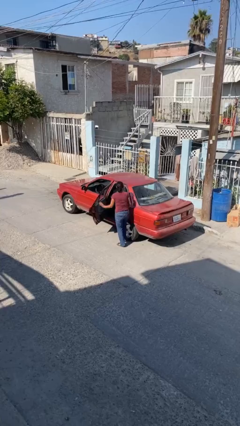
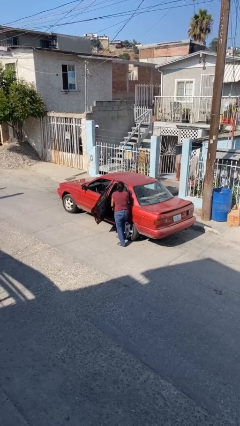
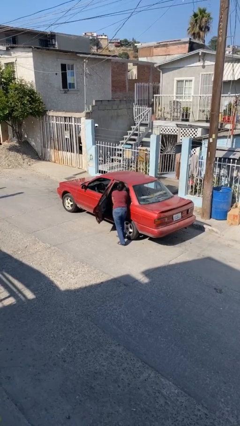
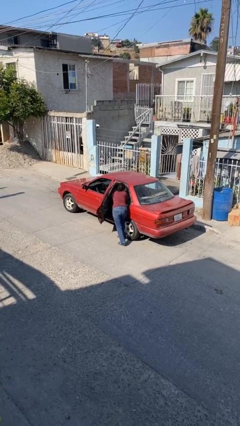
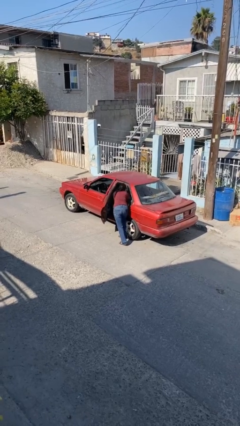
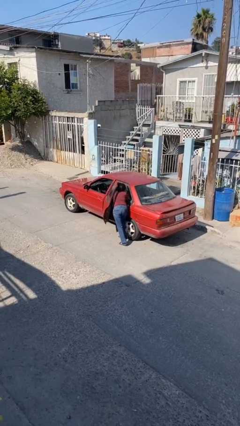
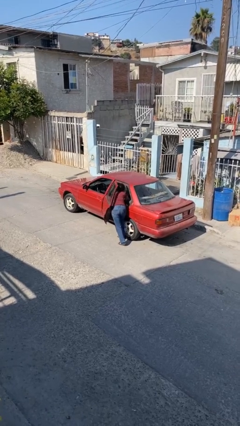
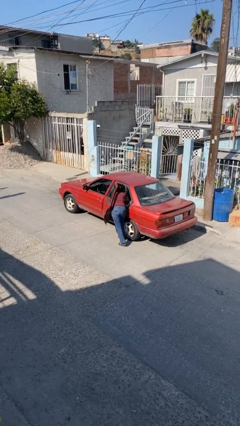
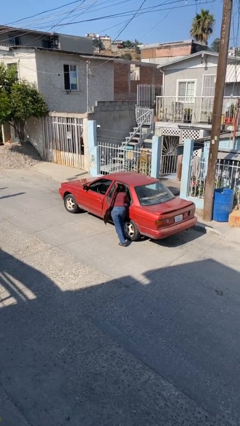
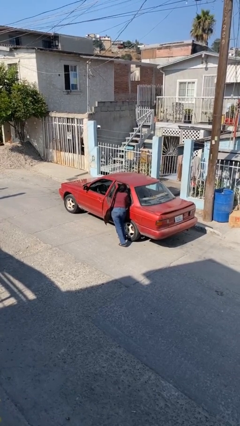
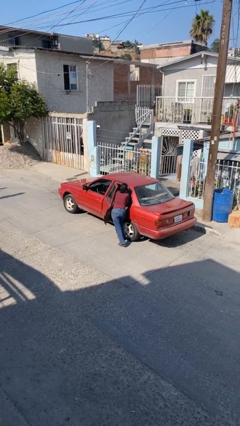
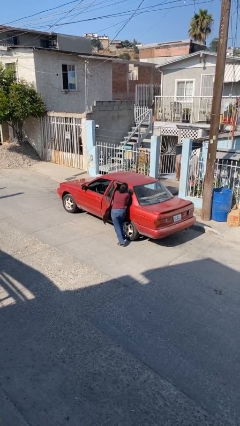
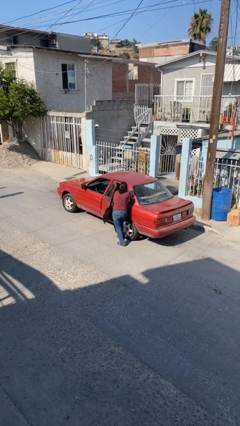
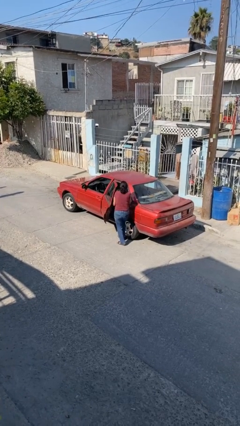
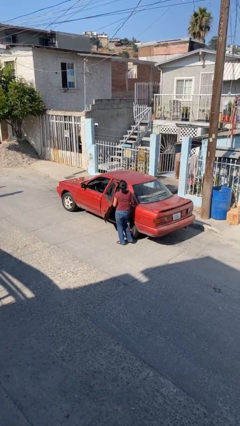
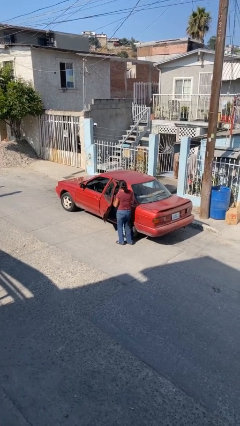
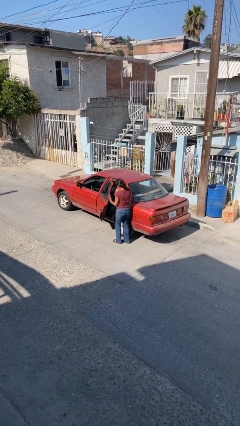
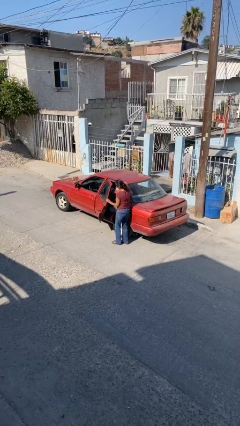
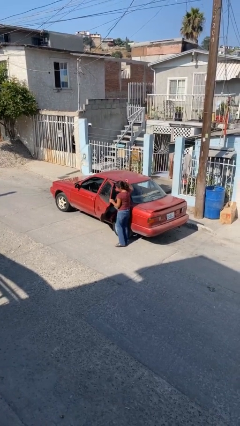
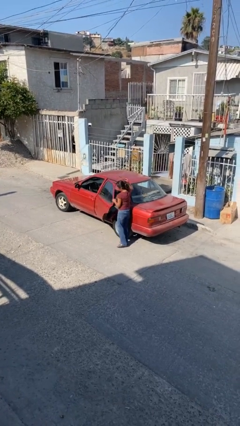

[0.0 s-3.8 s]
person unloads car

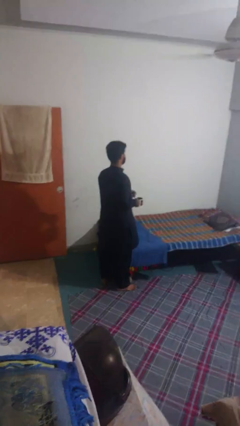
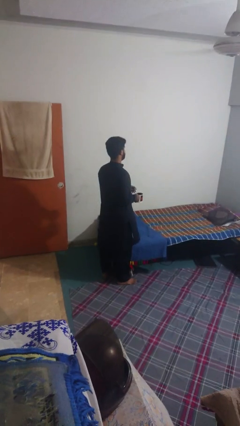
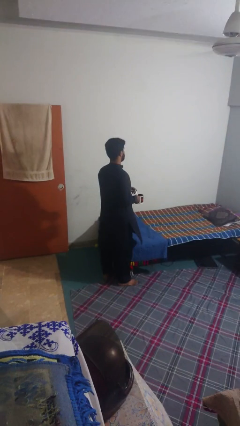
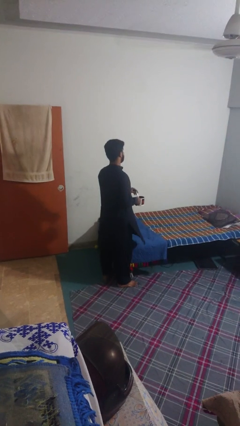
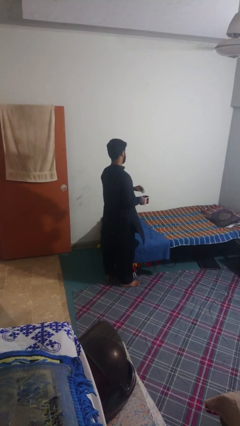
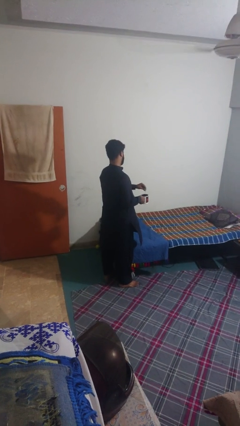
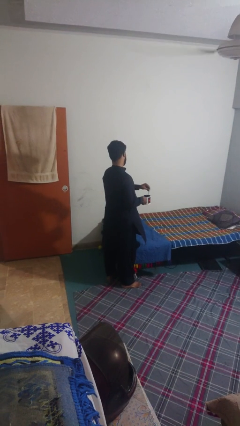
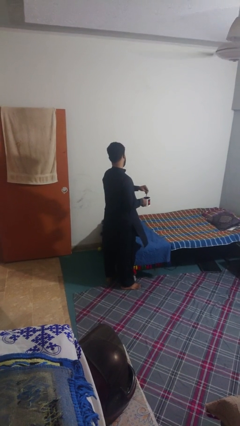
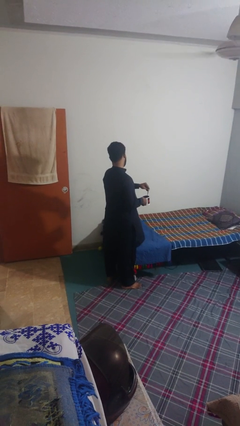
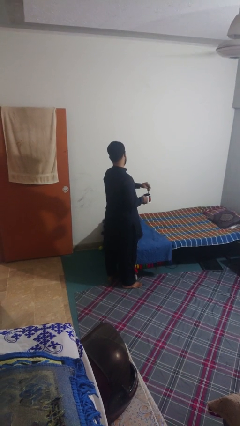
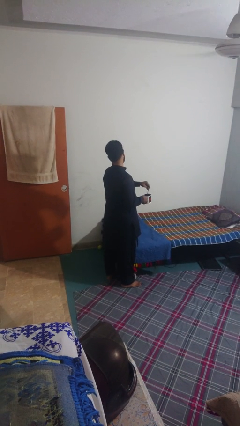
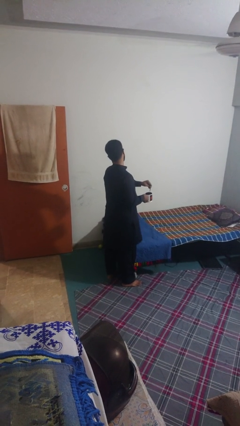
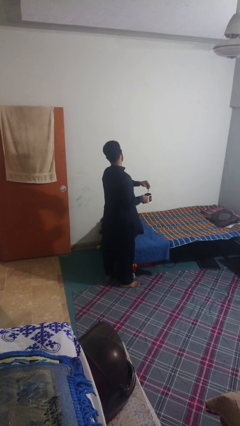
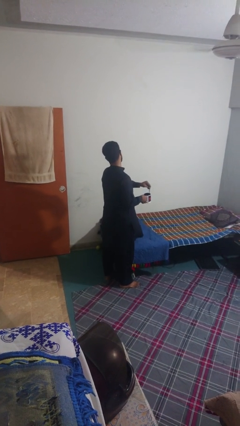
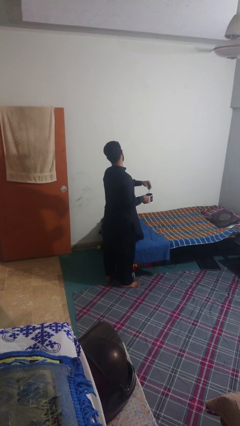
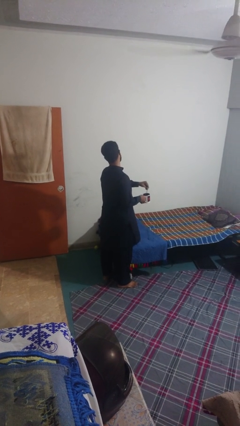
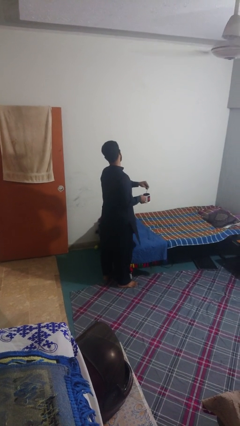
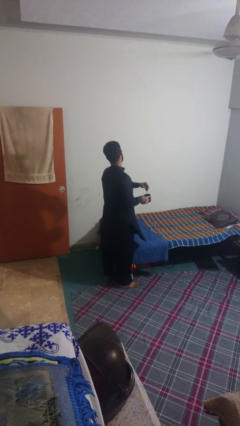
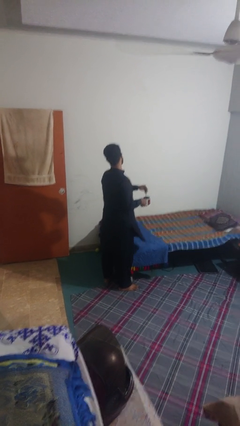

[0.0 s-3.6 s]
person stirs mug

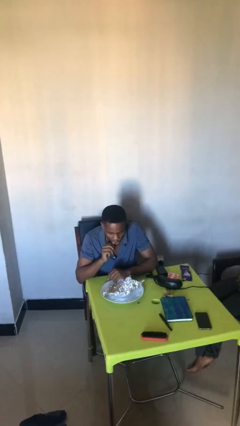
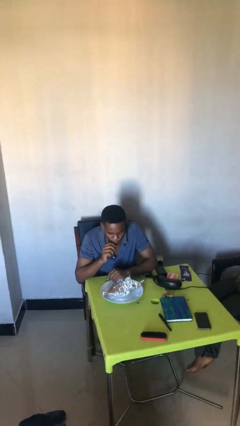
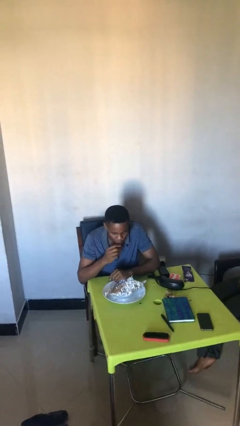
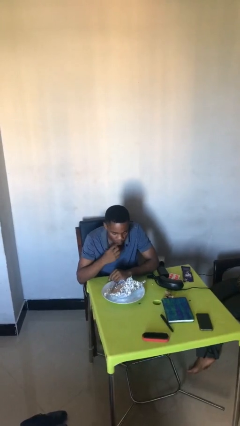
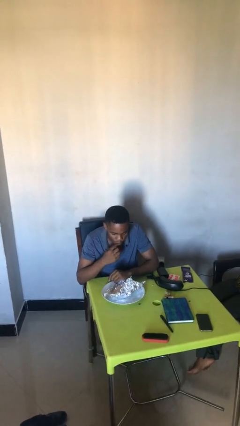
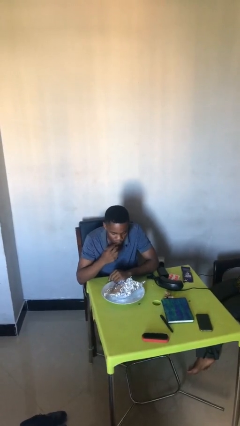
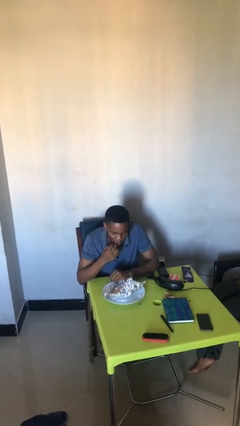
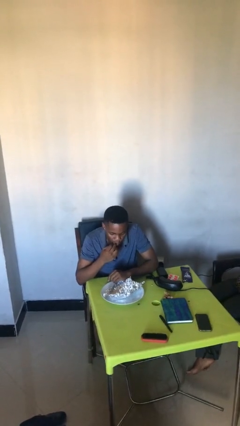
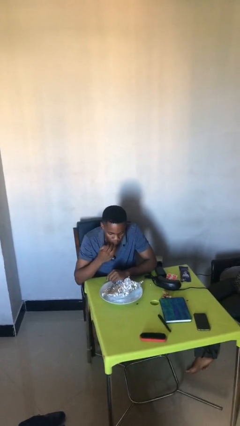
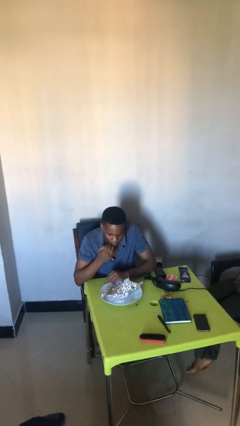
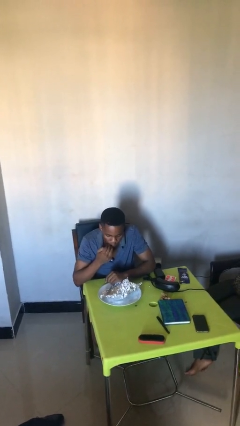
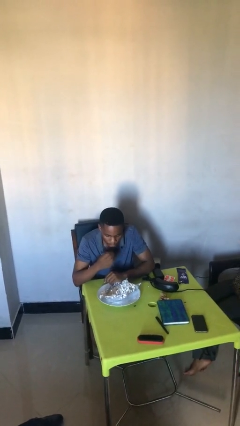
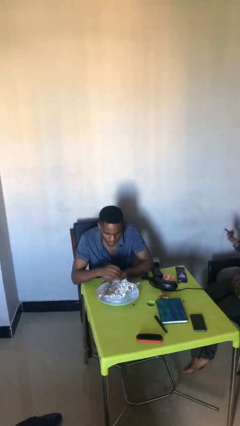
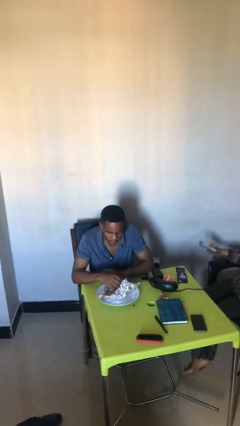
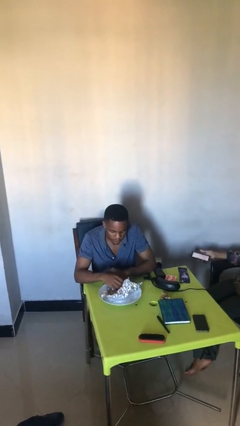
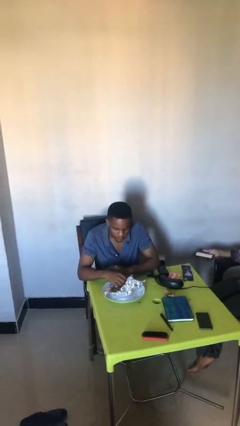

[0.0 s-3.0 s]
person licks fingers

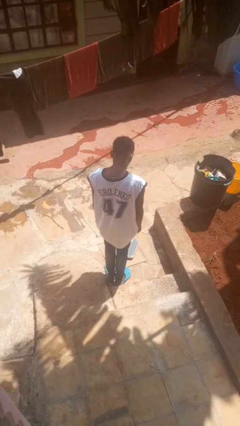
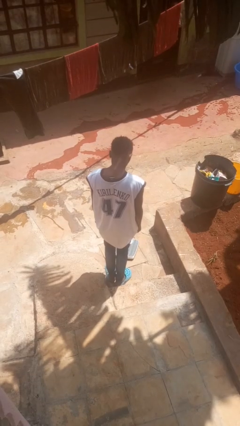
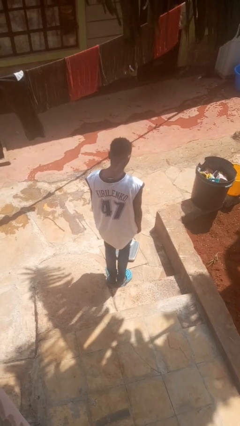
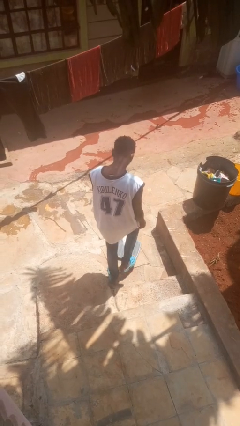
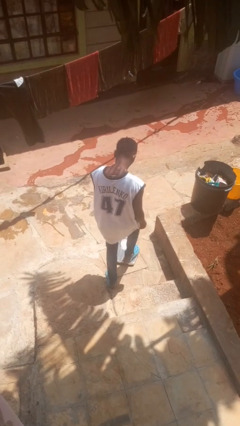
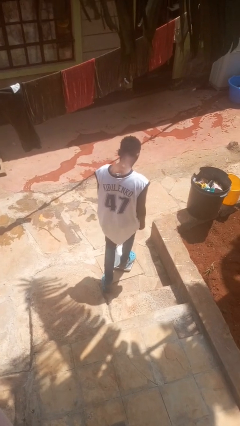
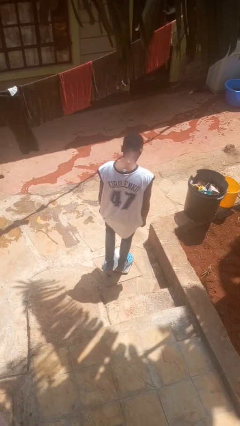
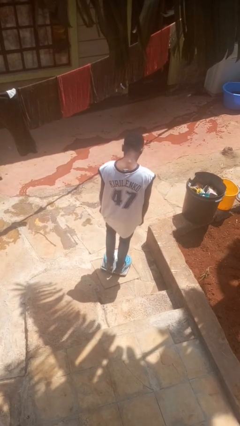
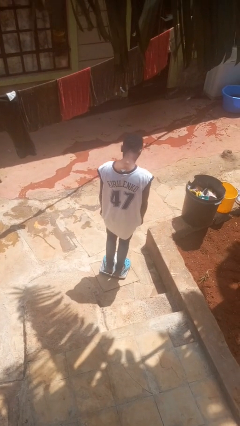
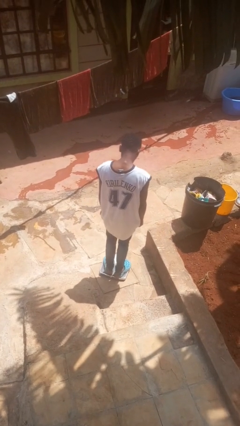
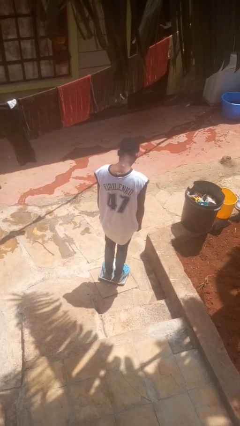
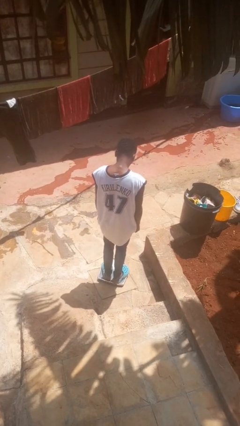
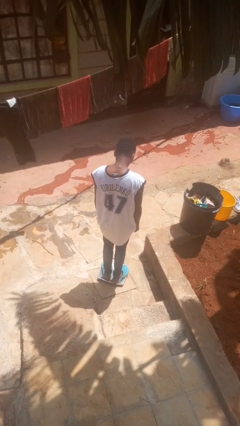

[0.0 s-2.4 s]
person uses bodyweight scale

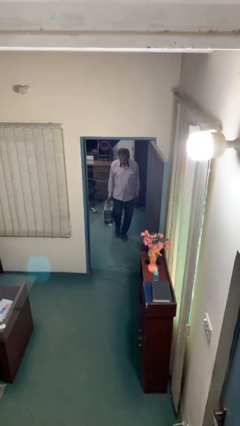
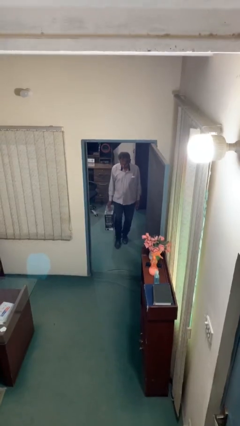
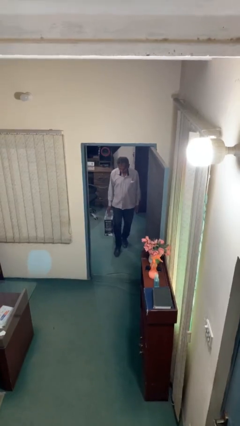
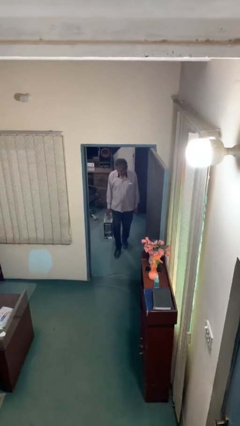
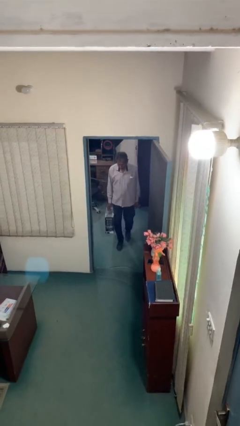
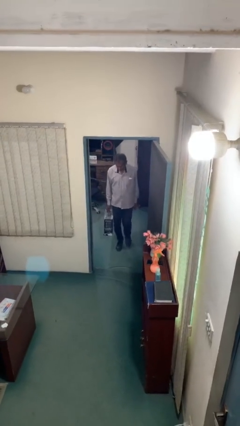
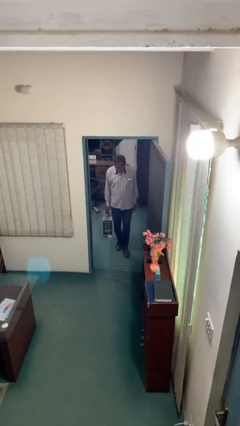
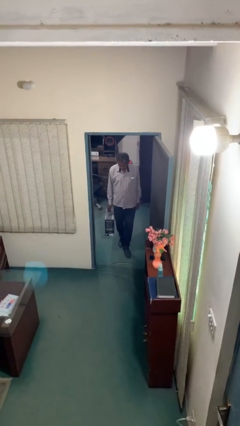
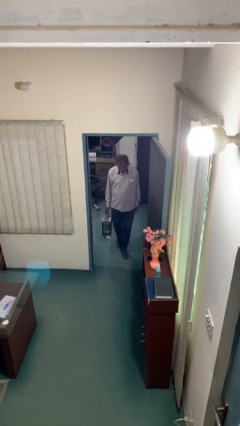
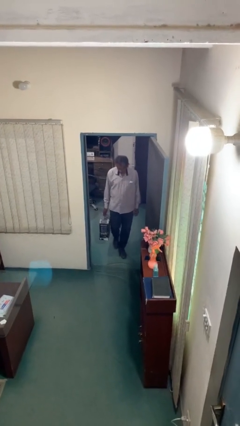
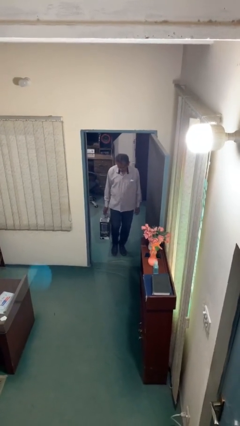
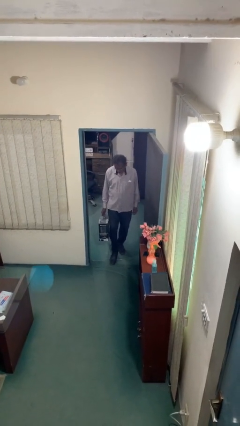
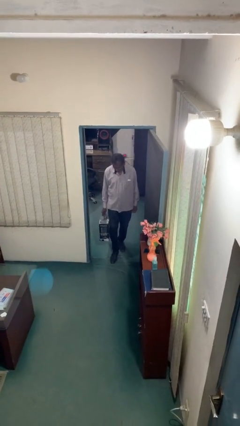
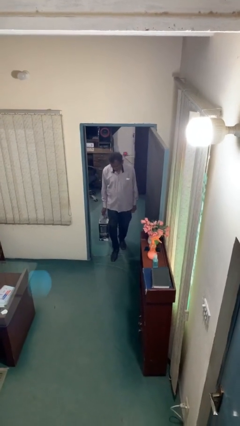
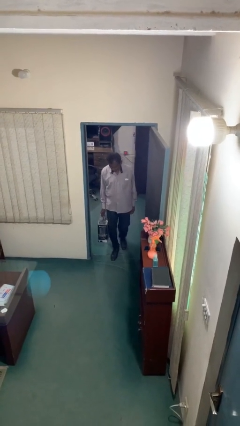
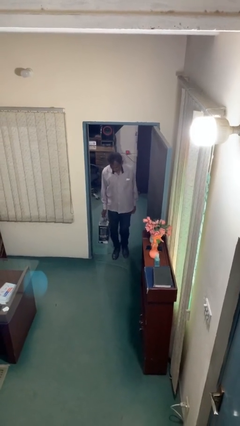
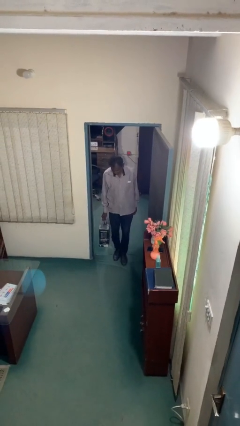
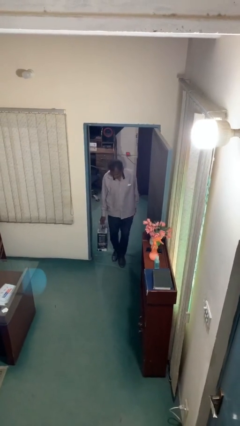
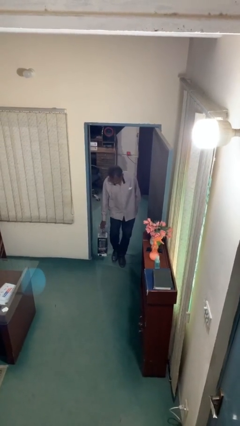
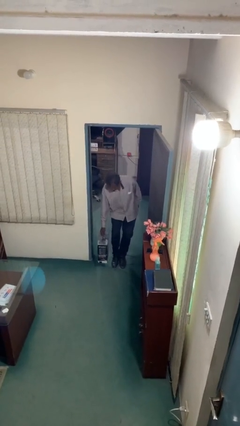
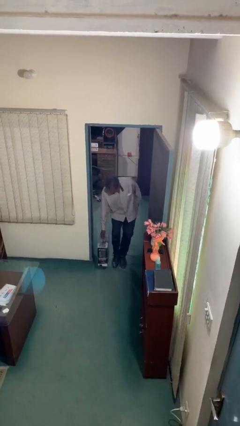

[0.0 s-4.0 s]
person carries heavy object

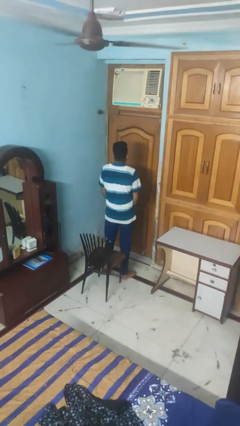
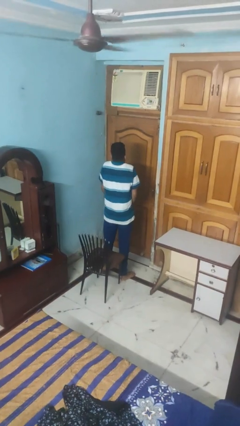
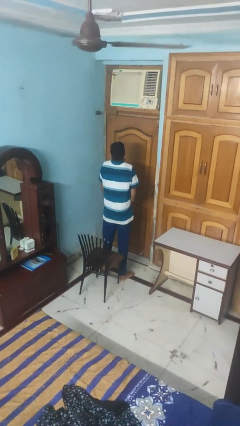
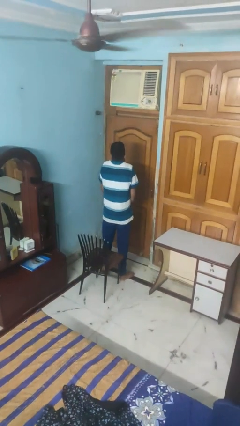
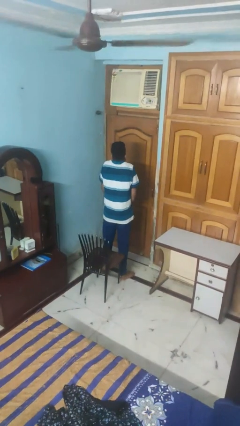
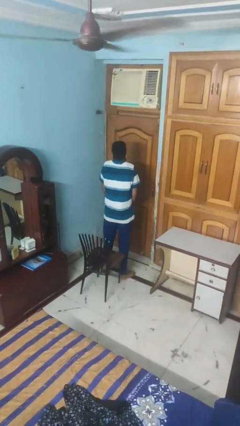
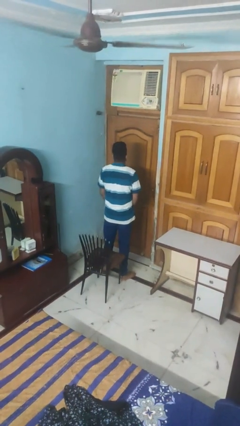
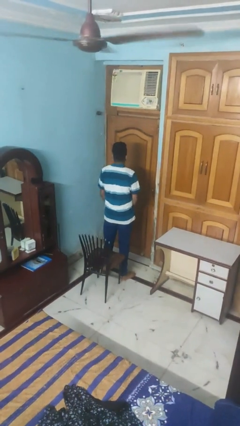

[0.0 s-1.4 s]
person shrugs
